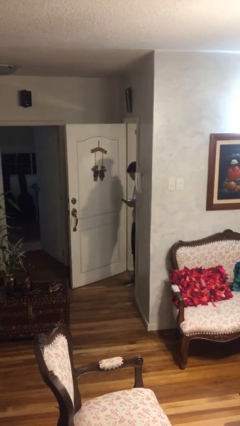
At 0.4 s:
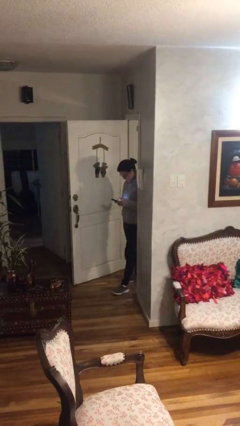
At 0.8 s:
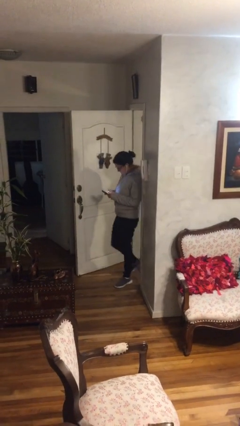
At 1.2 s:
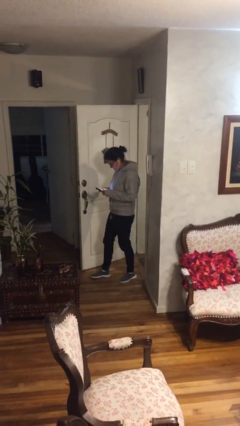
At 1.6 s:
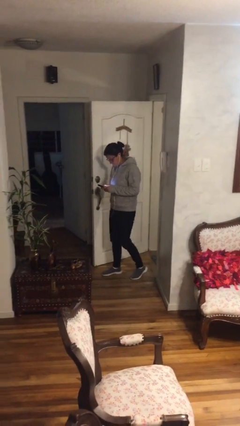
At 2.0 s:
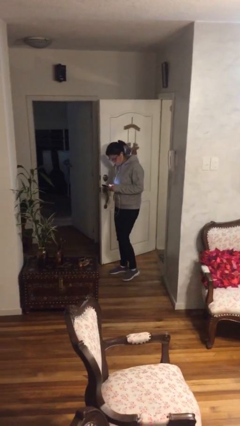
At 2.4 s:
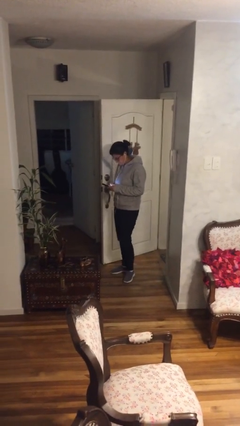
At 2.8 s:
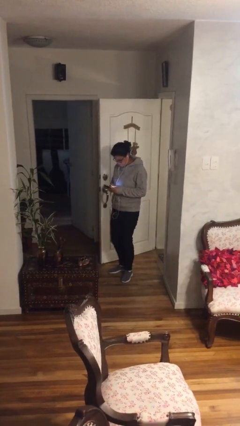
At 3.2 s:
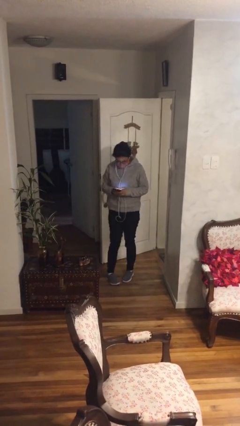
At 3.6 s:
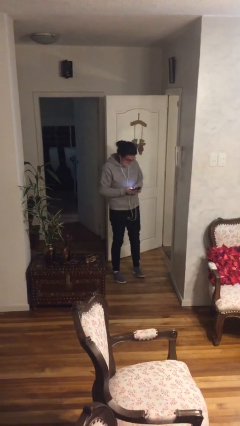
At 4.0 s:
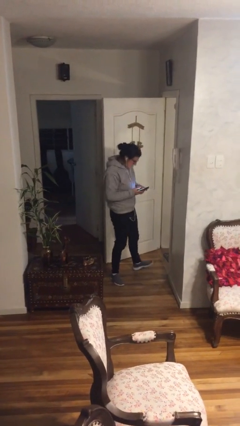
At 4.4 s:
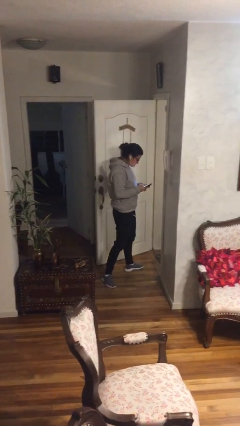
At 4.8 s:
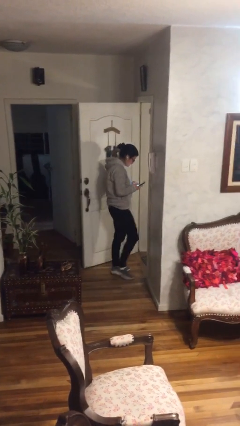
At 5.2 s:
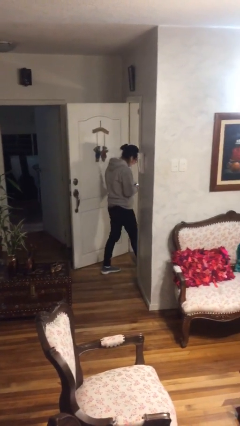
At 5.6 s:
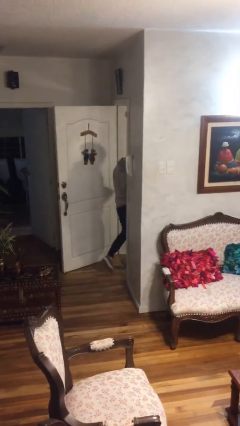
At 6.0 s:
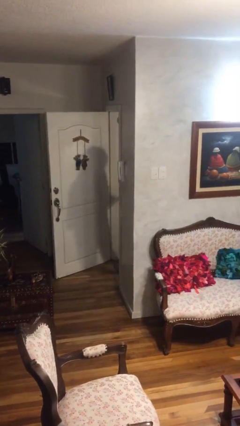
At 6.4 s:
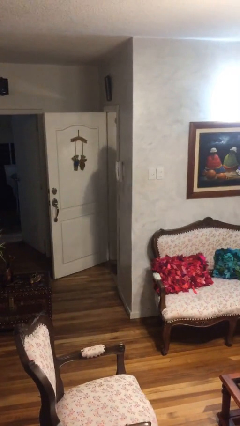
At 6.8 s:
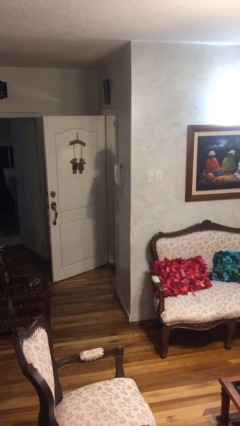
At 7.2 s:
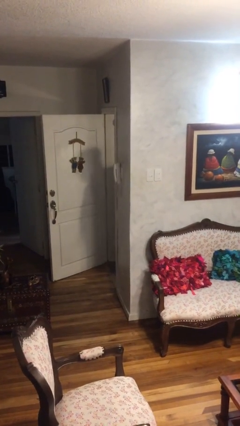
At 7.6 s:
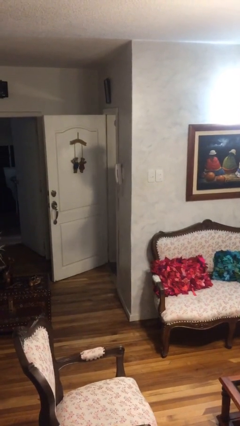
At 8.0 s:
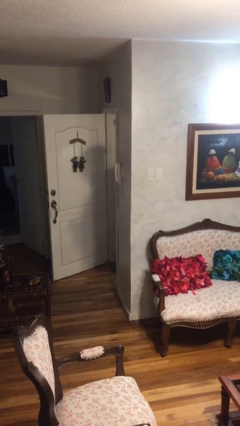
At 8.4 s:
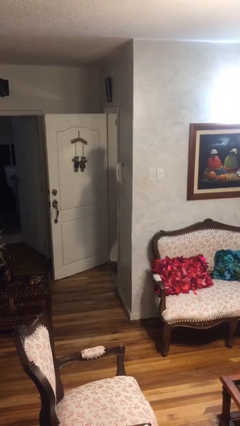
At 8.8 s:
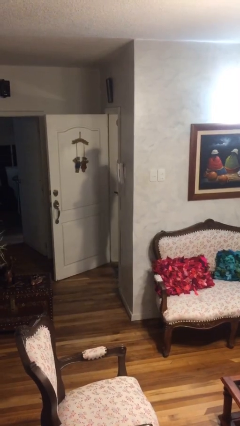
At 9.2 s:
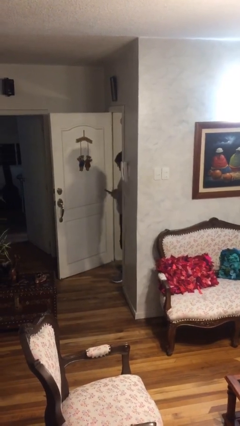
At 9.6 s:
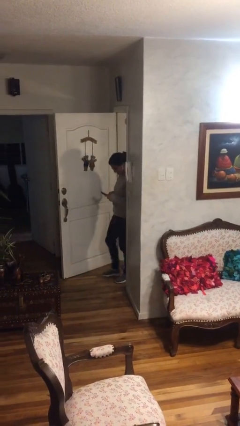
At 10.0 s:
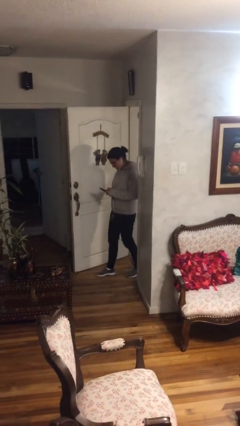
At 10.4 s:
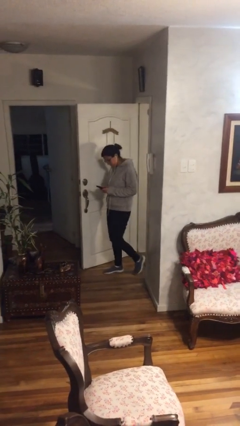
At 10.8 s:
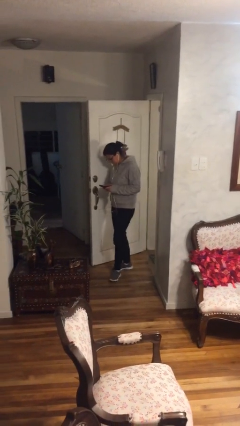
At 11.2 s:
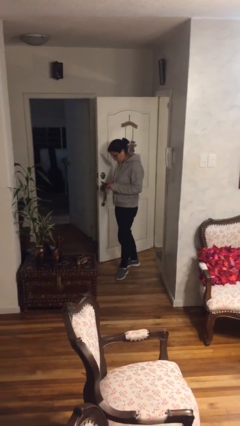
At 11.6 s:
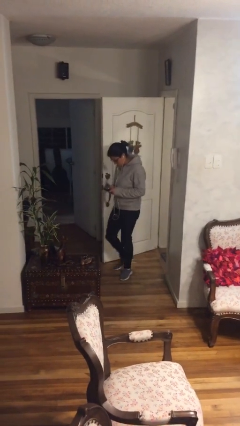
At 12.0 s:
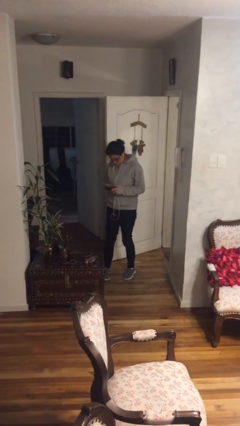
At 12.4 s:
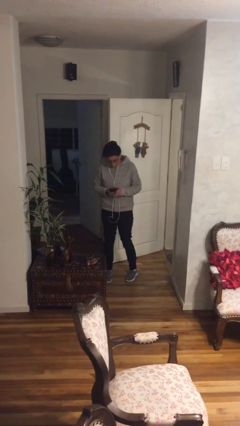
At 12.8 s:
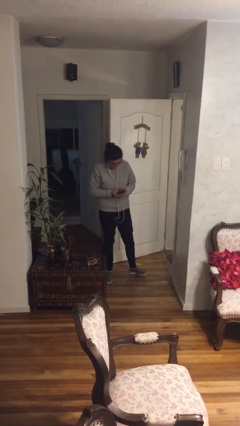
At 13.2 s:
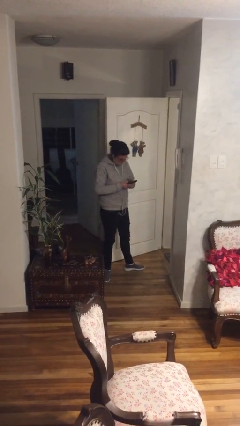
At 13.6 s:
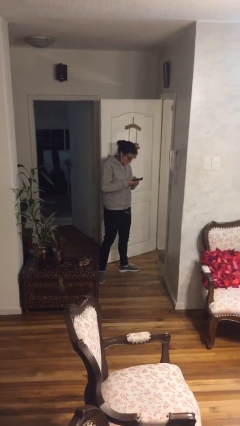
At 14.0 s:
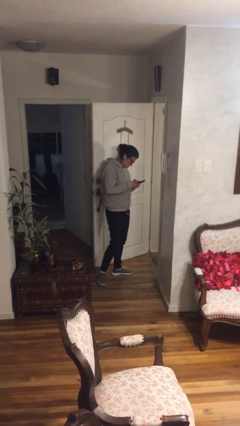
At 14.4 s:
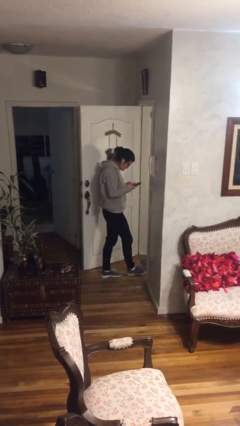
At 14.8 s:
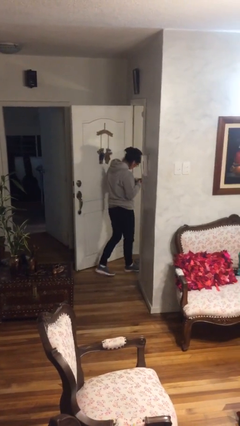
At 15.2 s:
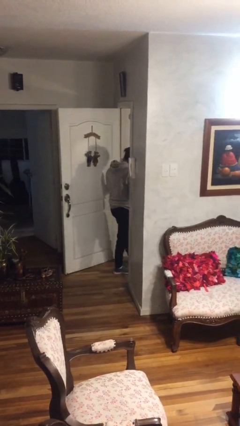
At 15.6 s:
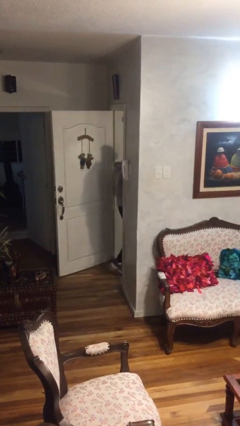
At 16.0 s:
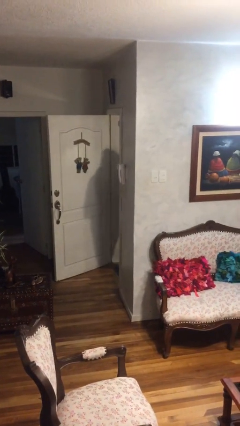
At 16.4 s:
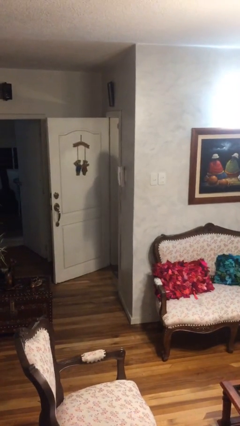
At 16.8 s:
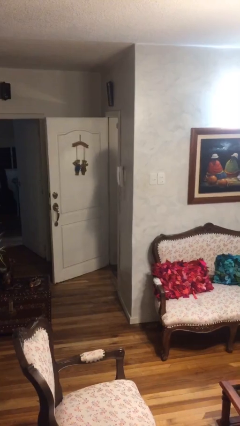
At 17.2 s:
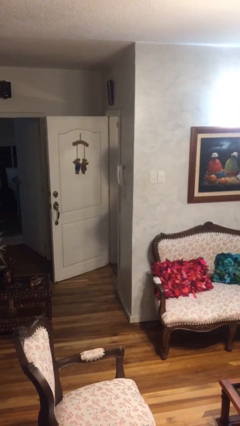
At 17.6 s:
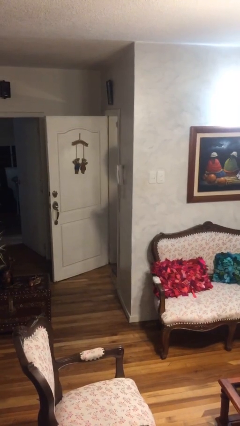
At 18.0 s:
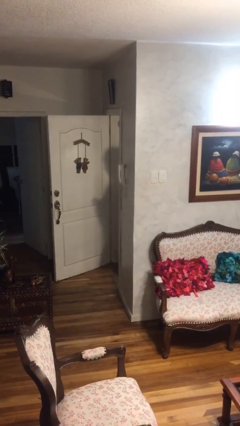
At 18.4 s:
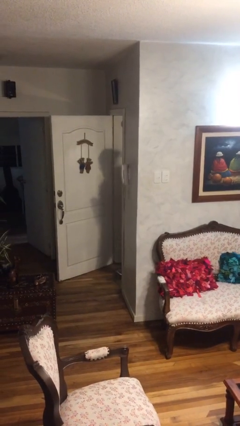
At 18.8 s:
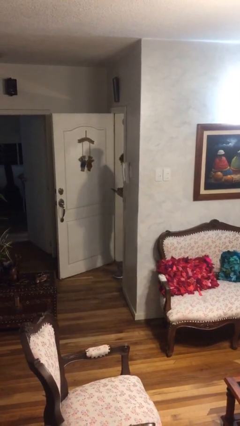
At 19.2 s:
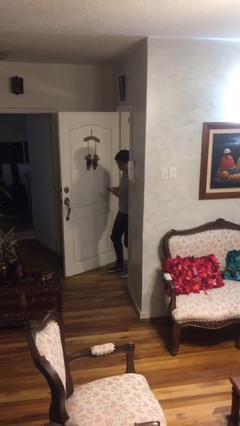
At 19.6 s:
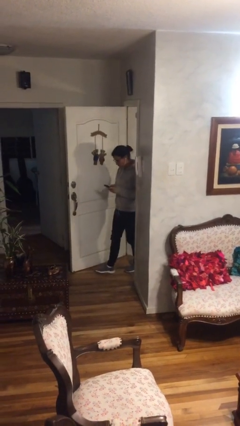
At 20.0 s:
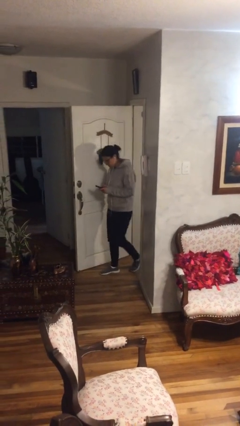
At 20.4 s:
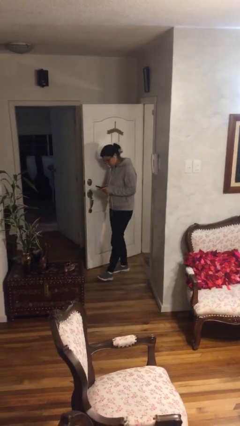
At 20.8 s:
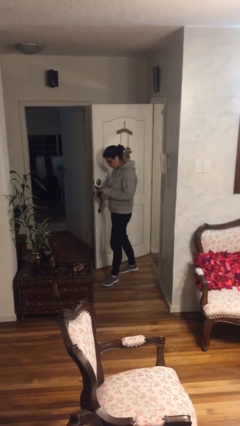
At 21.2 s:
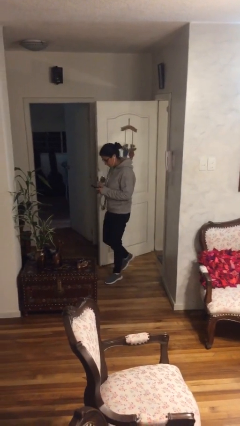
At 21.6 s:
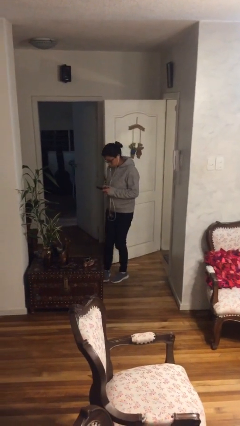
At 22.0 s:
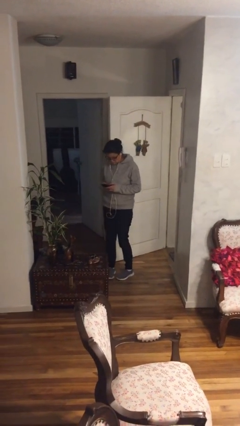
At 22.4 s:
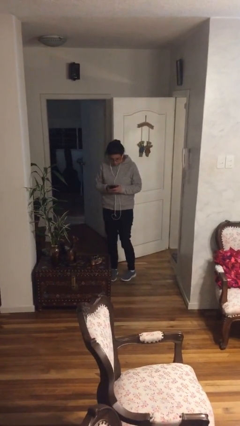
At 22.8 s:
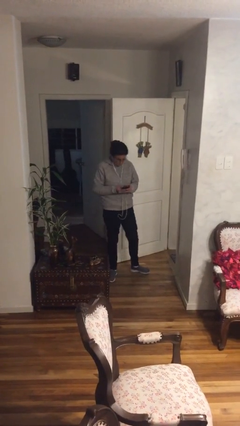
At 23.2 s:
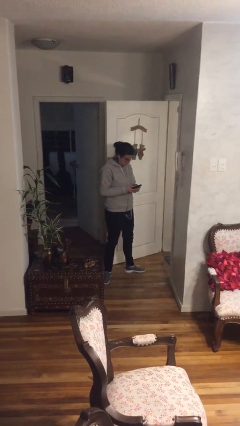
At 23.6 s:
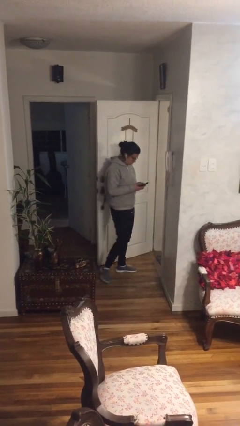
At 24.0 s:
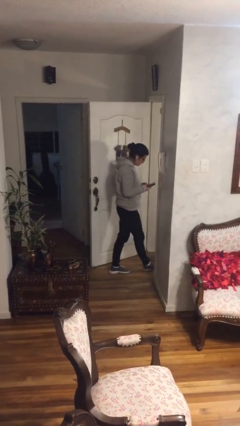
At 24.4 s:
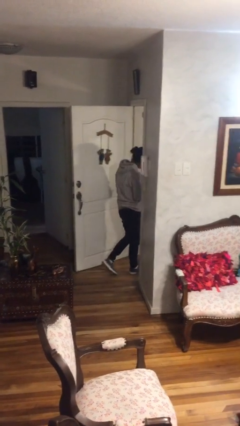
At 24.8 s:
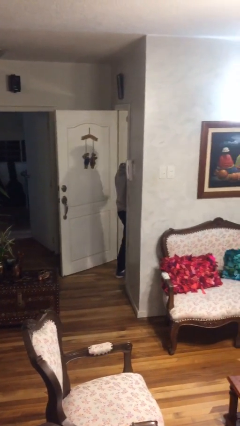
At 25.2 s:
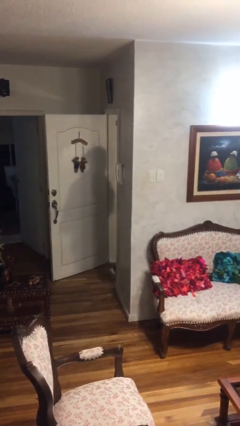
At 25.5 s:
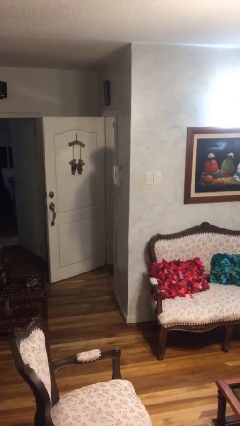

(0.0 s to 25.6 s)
person texts on phone

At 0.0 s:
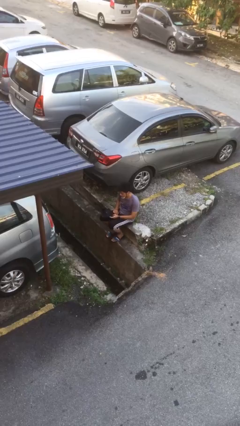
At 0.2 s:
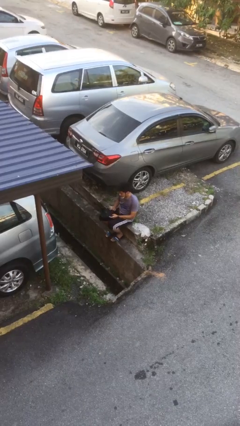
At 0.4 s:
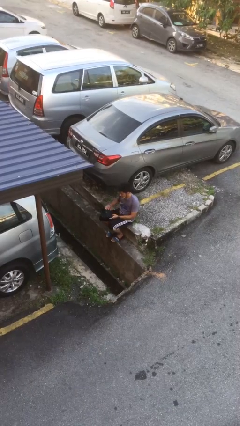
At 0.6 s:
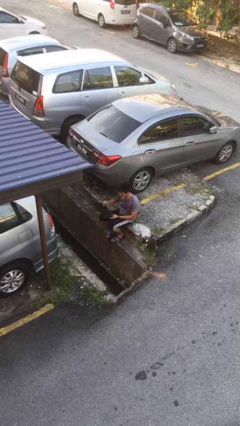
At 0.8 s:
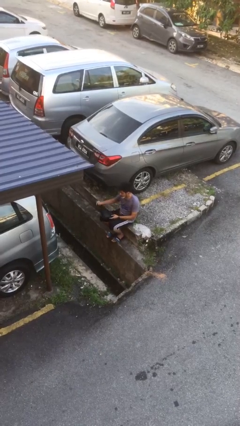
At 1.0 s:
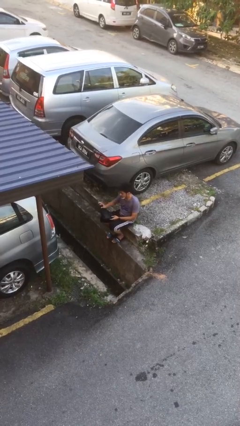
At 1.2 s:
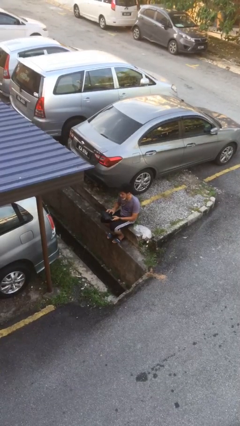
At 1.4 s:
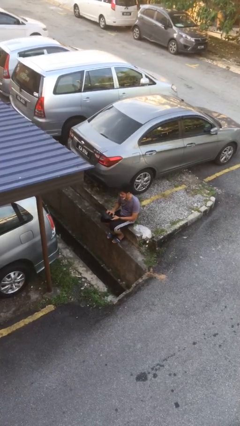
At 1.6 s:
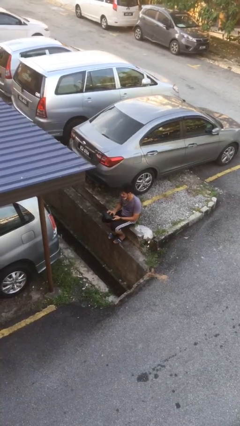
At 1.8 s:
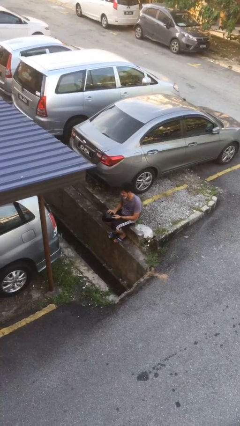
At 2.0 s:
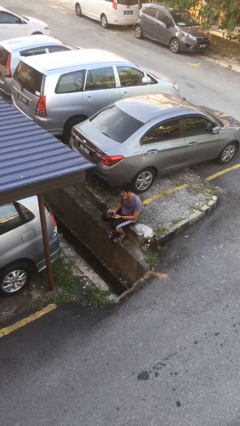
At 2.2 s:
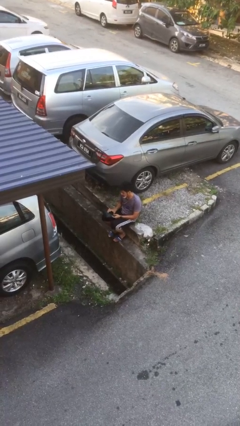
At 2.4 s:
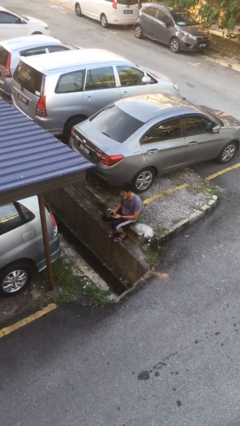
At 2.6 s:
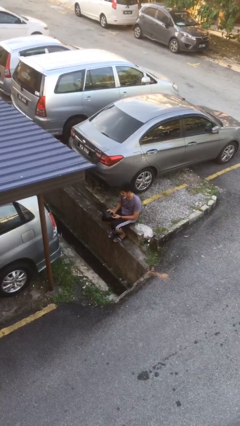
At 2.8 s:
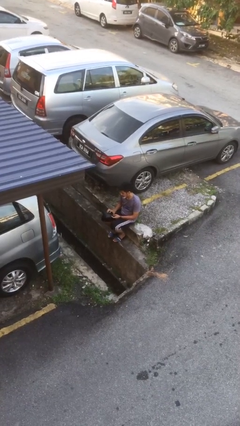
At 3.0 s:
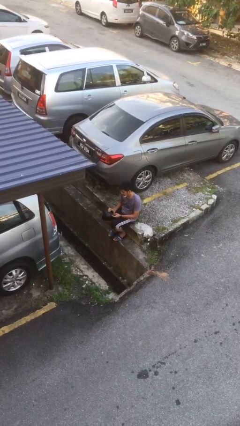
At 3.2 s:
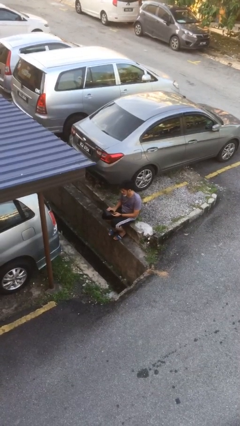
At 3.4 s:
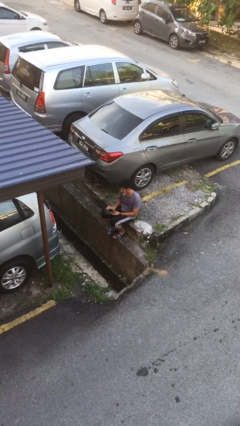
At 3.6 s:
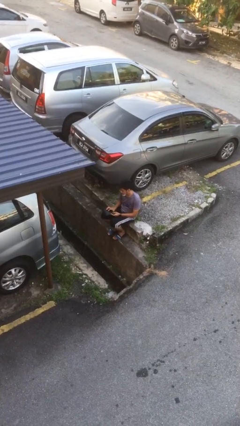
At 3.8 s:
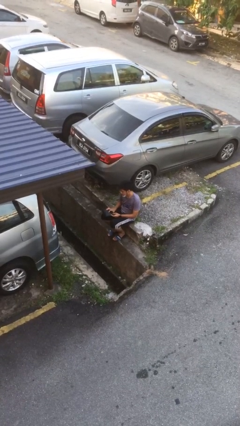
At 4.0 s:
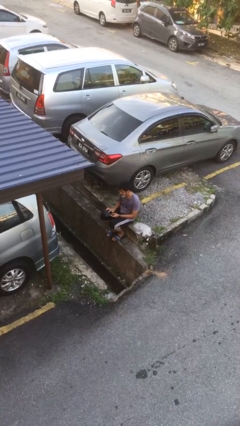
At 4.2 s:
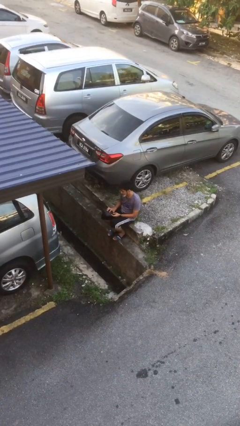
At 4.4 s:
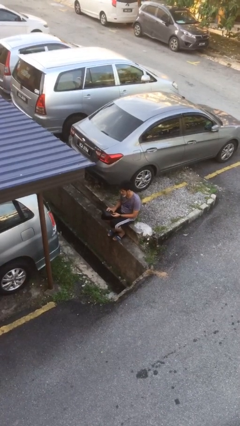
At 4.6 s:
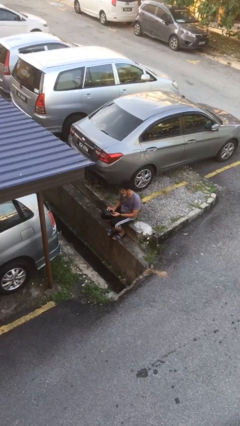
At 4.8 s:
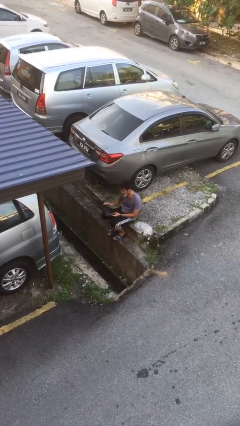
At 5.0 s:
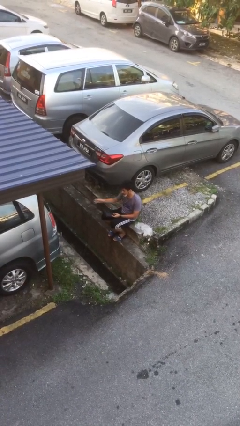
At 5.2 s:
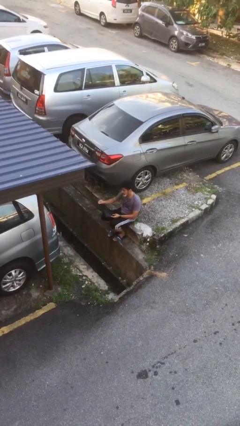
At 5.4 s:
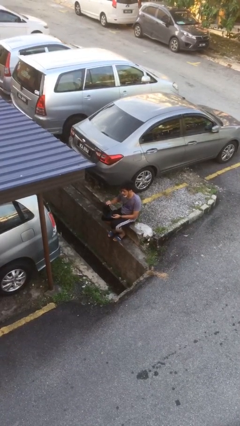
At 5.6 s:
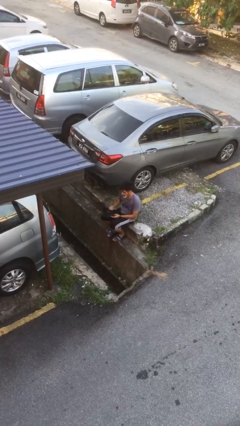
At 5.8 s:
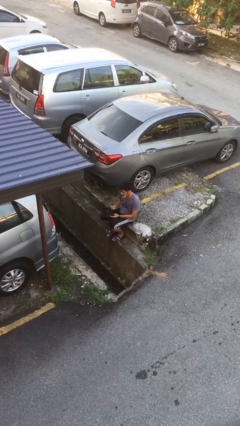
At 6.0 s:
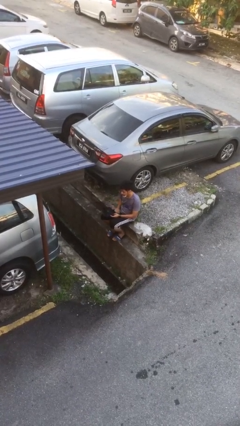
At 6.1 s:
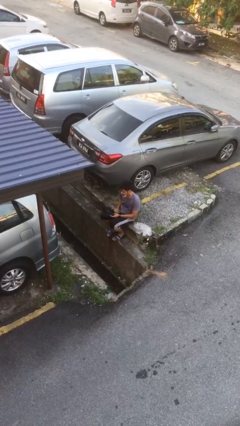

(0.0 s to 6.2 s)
person interacts with laptop
